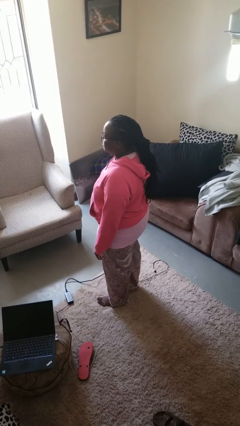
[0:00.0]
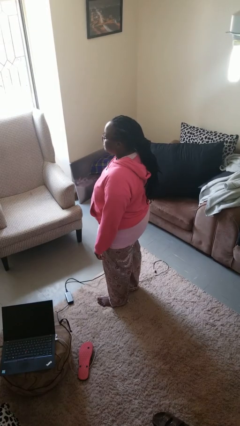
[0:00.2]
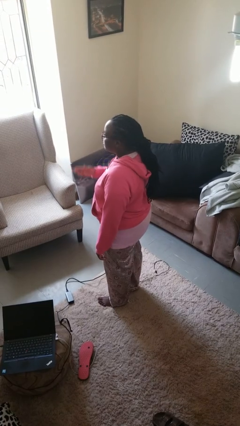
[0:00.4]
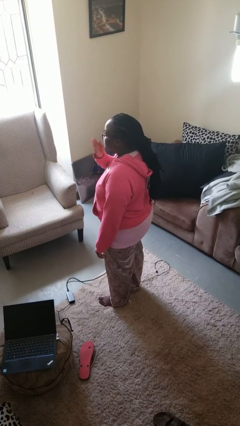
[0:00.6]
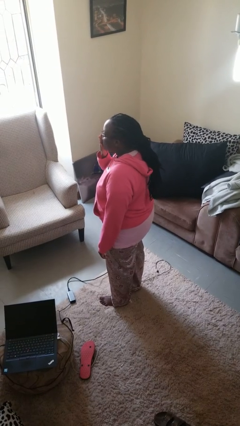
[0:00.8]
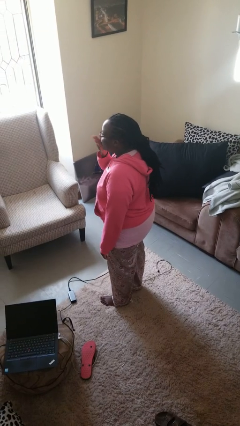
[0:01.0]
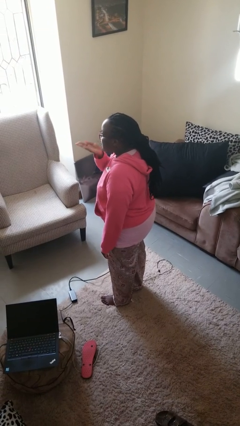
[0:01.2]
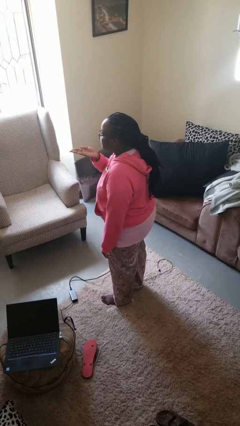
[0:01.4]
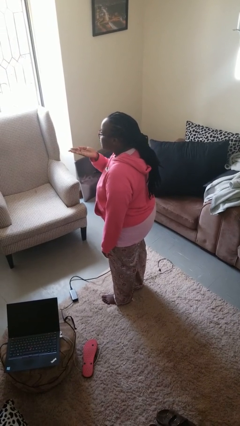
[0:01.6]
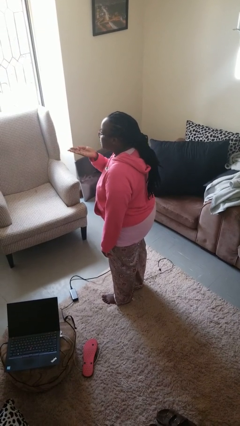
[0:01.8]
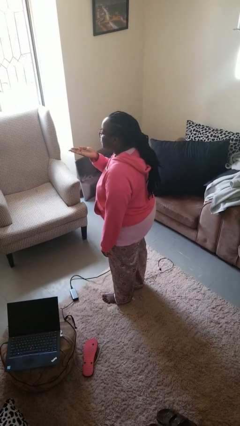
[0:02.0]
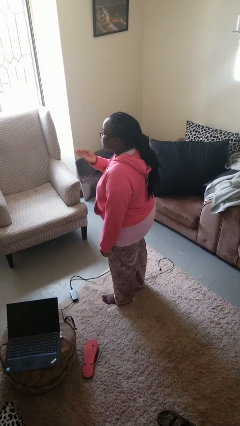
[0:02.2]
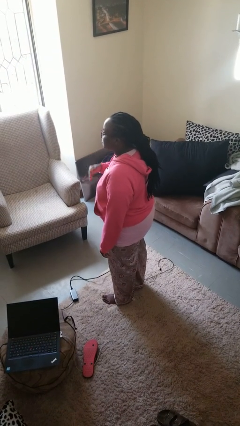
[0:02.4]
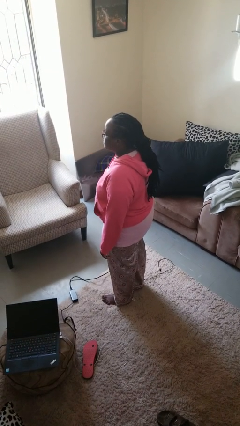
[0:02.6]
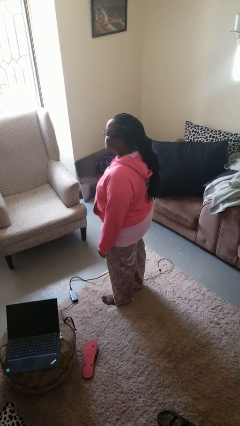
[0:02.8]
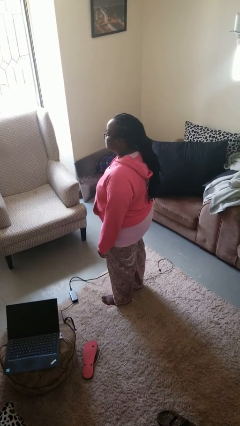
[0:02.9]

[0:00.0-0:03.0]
person gestures blow kiss

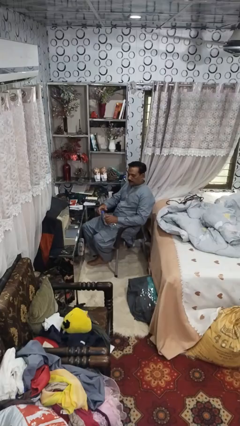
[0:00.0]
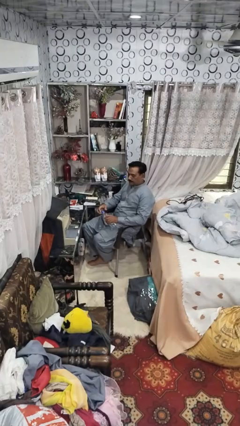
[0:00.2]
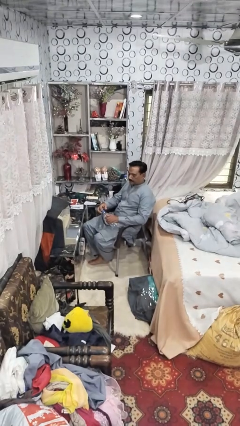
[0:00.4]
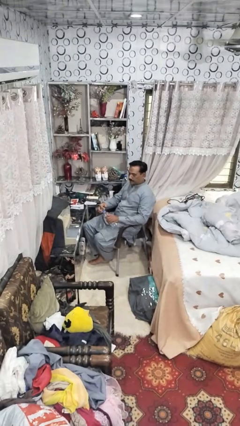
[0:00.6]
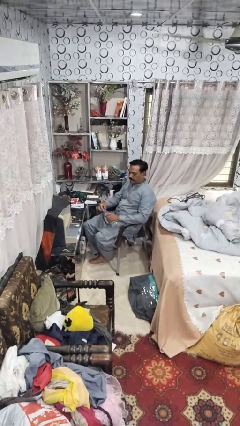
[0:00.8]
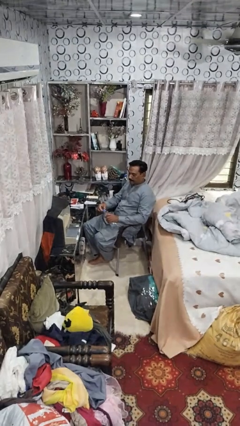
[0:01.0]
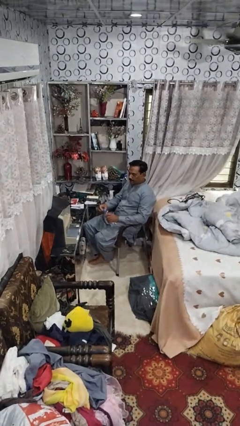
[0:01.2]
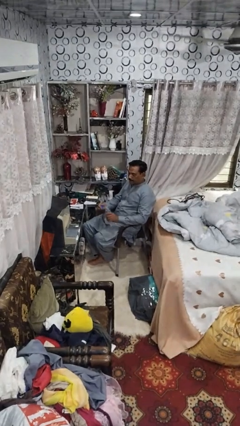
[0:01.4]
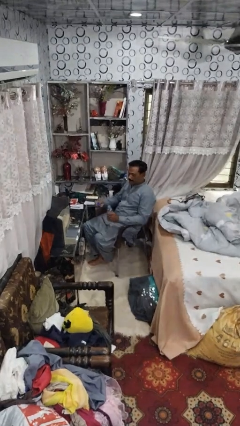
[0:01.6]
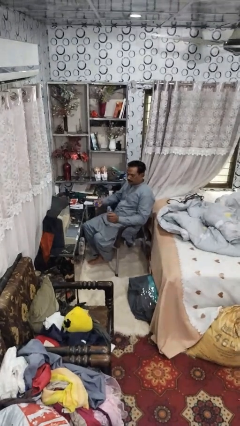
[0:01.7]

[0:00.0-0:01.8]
person unscrews lid from bottle

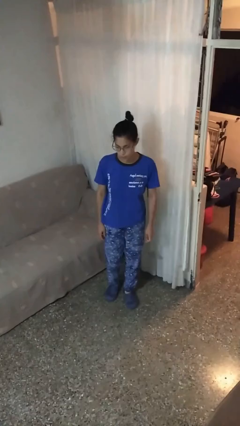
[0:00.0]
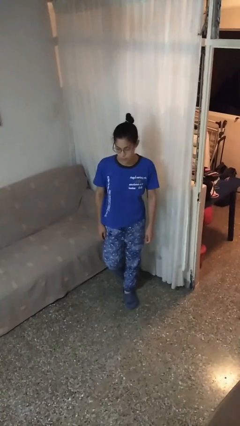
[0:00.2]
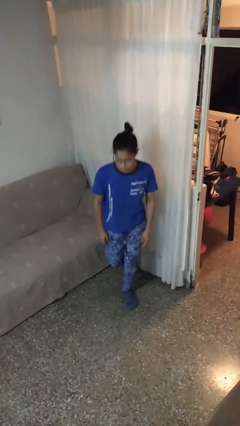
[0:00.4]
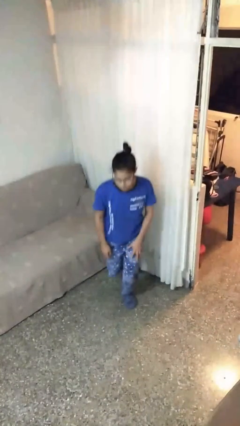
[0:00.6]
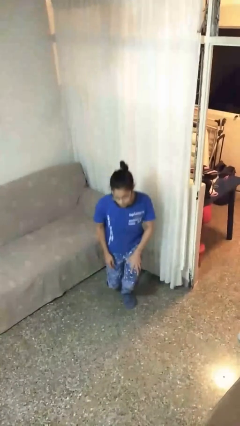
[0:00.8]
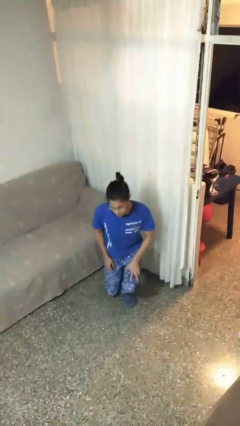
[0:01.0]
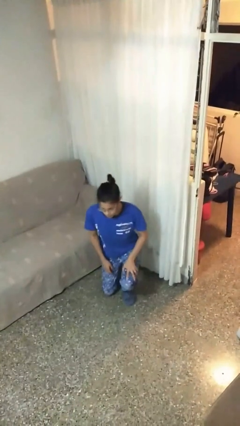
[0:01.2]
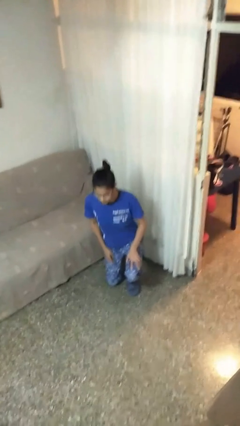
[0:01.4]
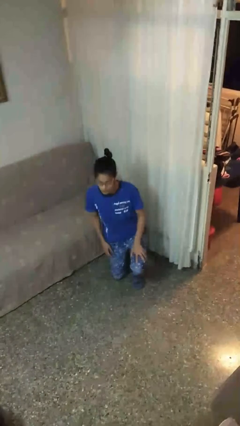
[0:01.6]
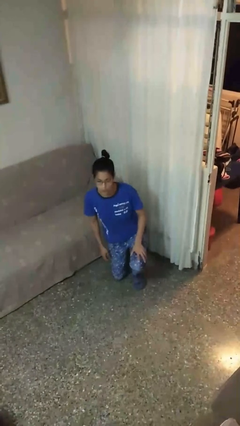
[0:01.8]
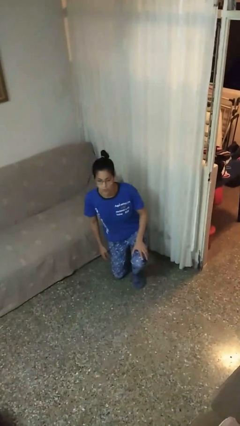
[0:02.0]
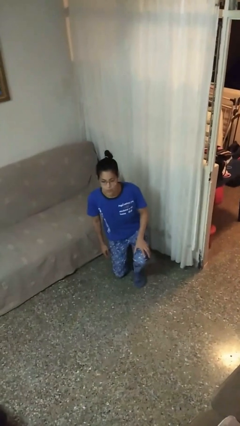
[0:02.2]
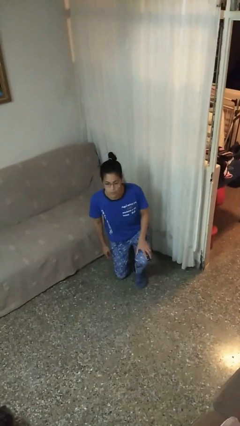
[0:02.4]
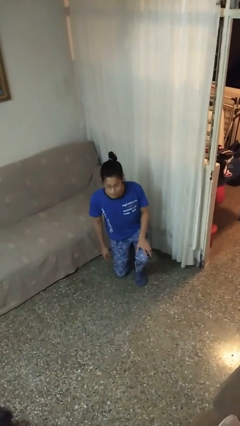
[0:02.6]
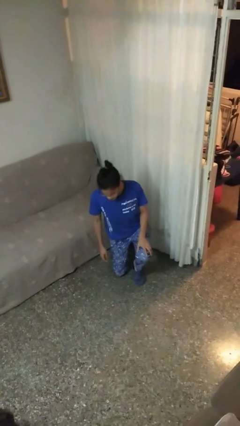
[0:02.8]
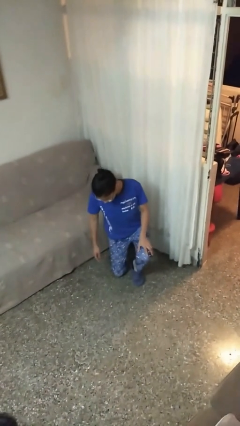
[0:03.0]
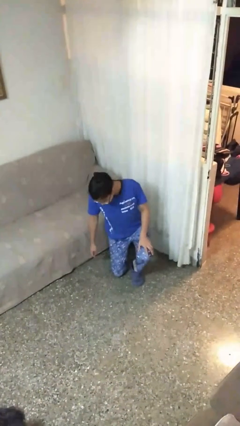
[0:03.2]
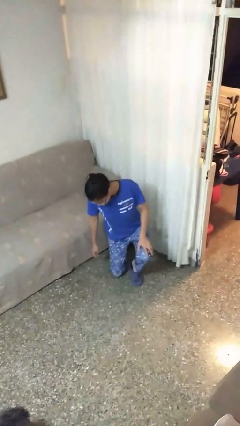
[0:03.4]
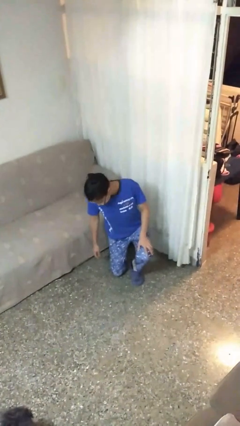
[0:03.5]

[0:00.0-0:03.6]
person kneels

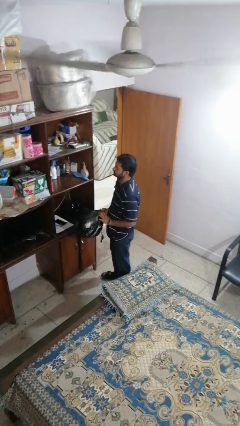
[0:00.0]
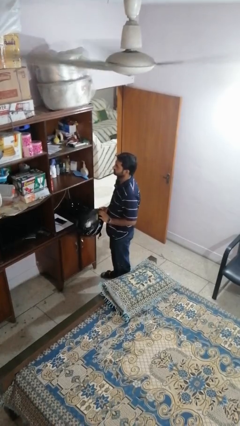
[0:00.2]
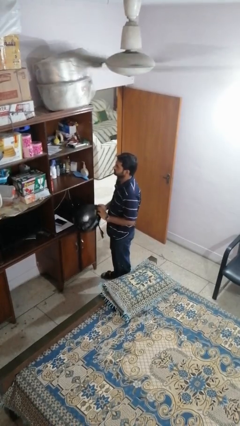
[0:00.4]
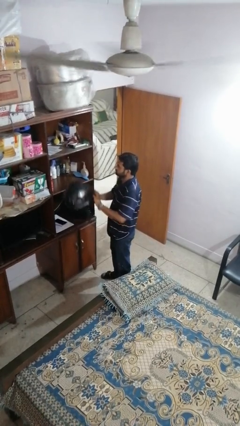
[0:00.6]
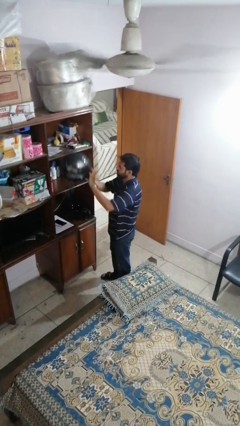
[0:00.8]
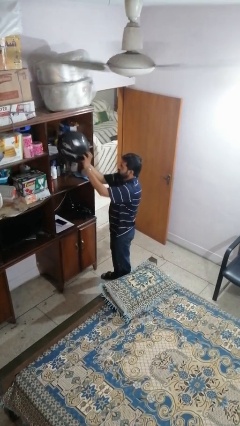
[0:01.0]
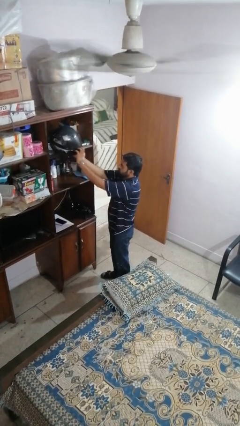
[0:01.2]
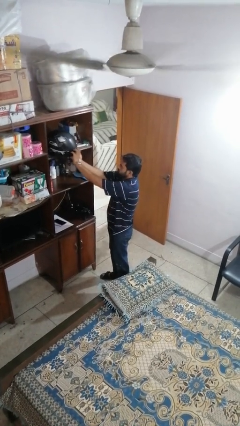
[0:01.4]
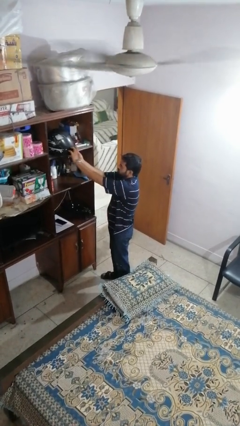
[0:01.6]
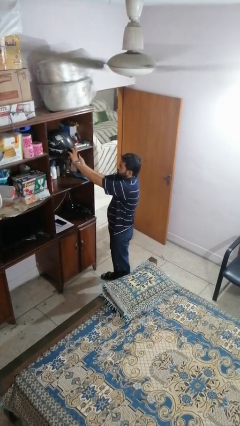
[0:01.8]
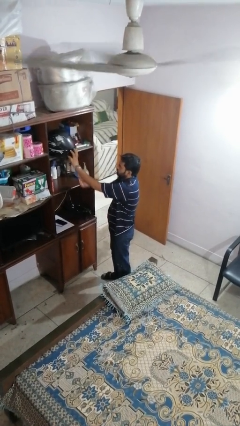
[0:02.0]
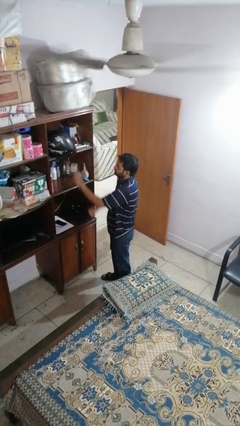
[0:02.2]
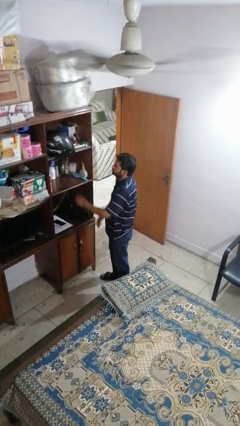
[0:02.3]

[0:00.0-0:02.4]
person puts down object on shelf

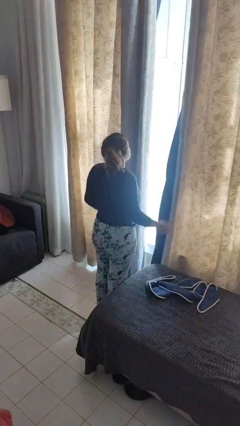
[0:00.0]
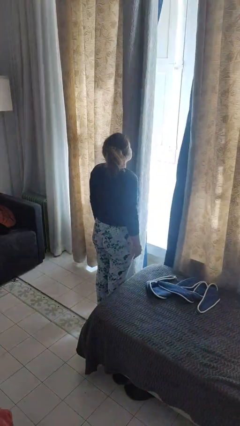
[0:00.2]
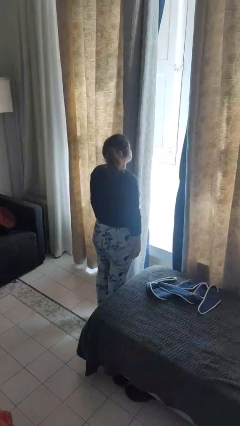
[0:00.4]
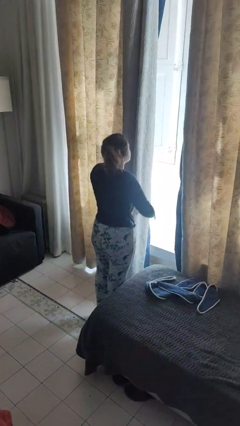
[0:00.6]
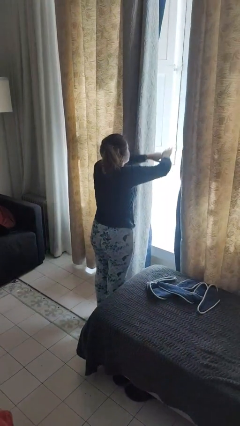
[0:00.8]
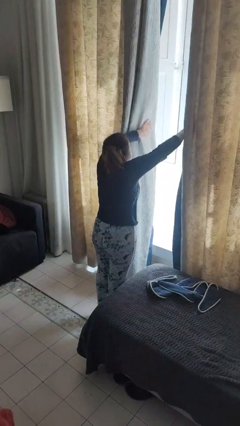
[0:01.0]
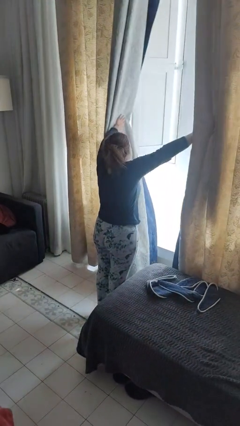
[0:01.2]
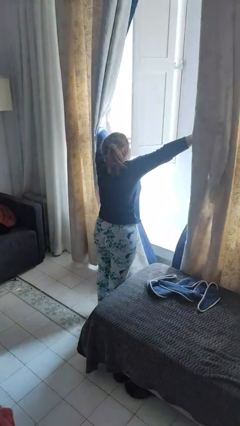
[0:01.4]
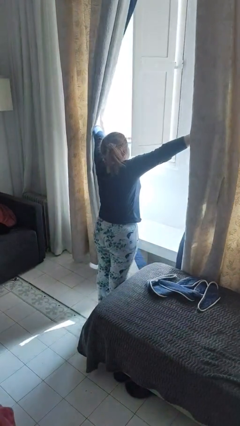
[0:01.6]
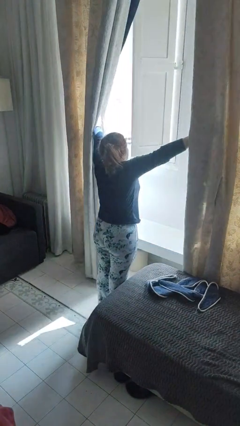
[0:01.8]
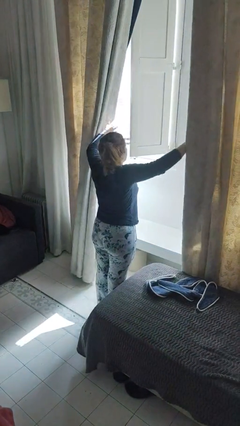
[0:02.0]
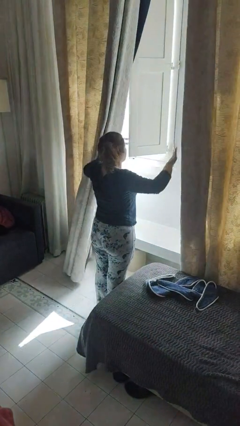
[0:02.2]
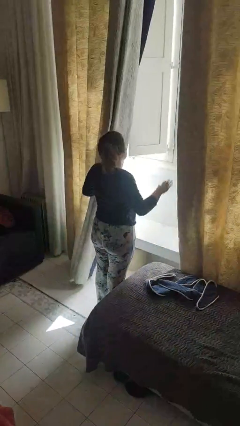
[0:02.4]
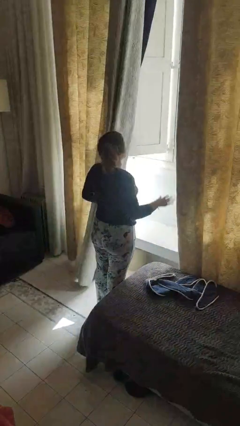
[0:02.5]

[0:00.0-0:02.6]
person opens curtains

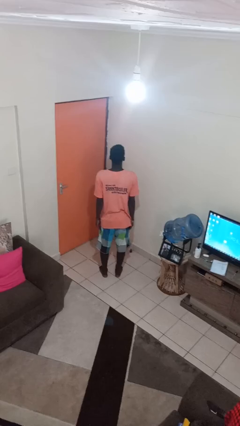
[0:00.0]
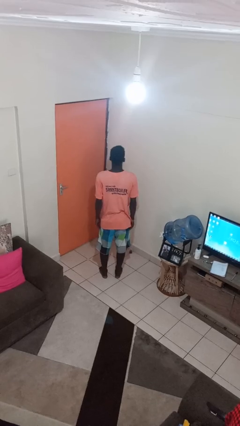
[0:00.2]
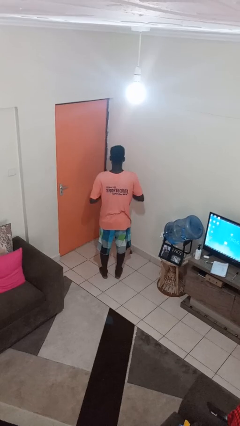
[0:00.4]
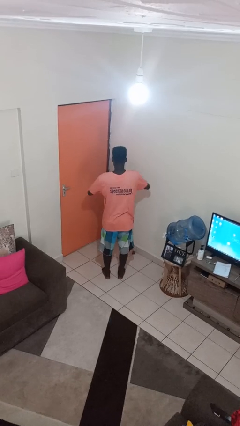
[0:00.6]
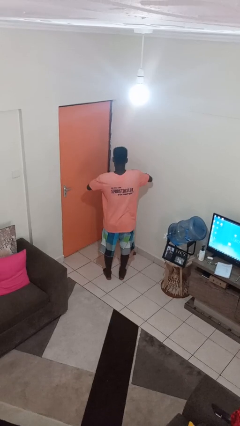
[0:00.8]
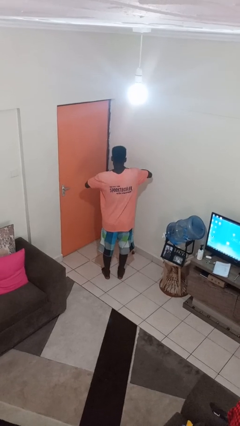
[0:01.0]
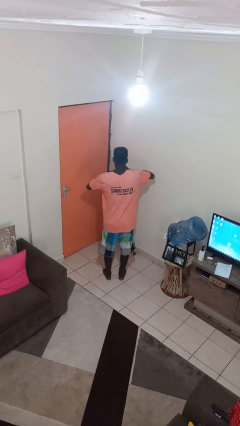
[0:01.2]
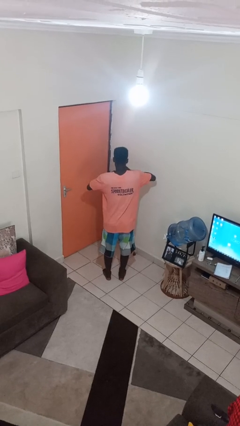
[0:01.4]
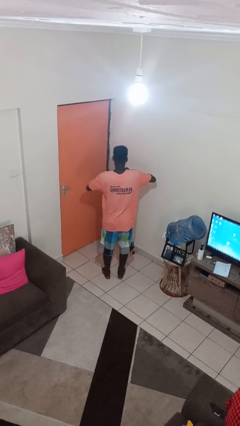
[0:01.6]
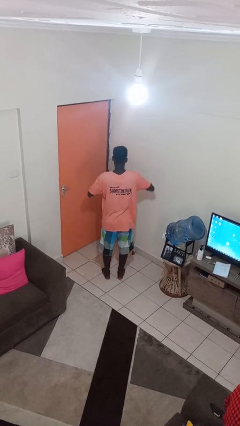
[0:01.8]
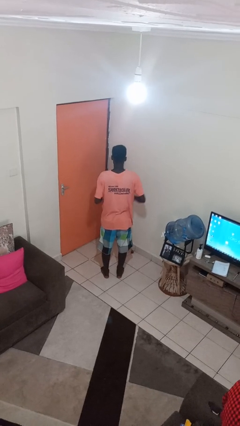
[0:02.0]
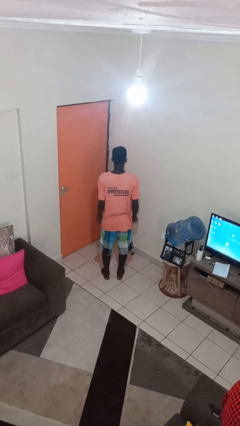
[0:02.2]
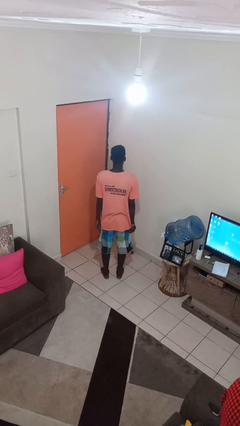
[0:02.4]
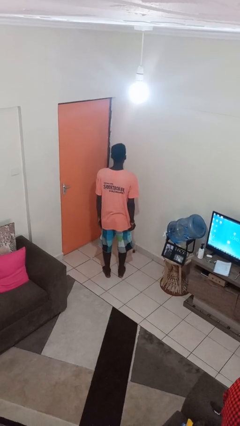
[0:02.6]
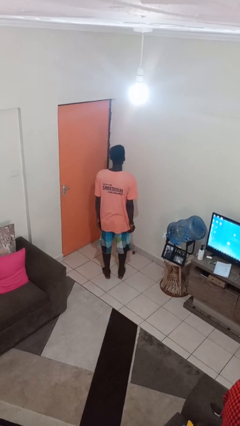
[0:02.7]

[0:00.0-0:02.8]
person takes off ring

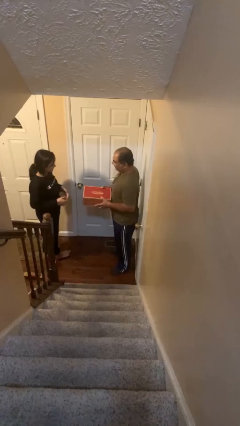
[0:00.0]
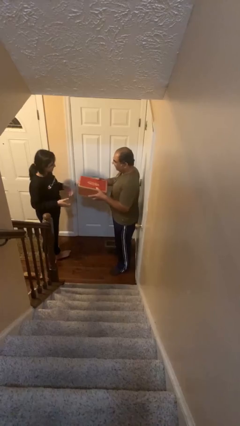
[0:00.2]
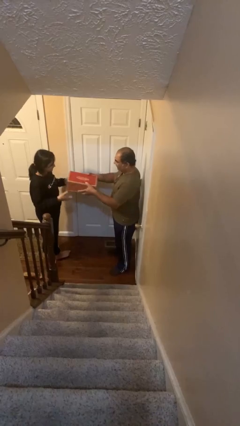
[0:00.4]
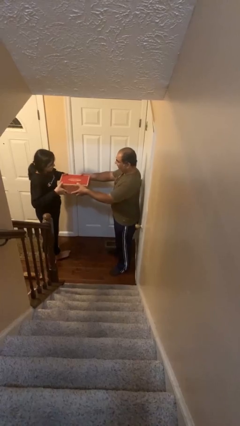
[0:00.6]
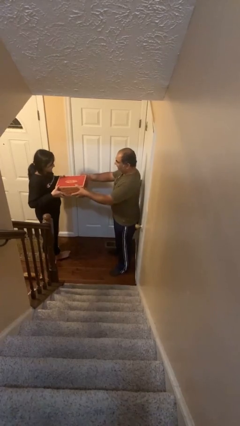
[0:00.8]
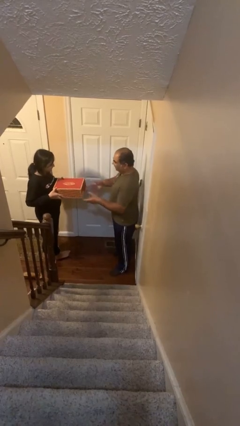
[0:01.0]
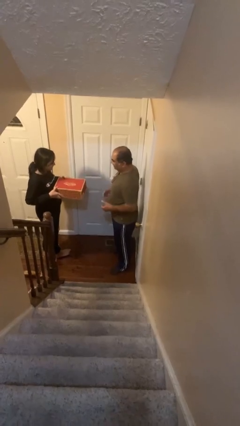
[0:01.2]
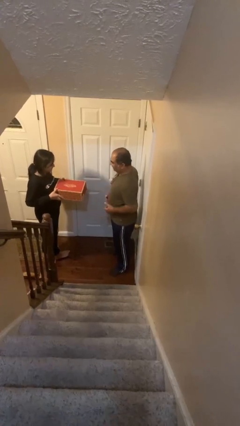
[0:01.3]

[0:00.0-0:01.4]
person transfers object to person
